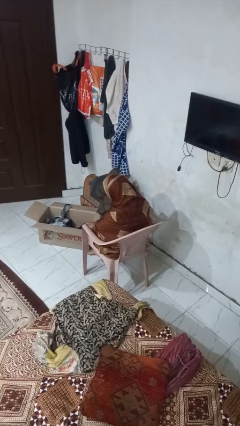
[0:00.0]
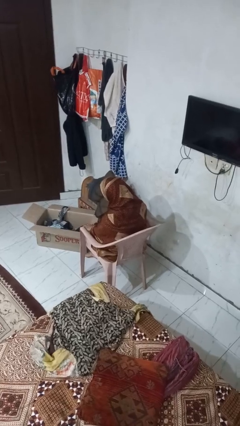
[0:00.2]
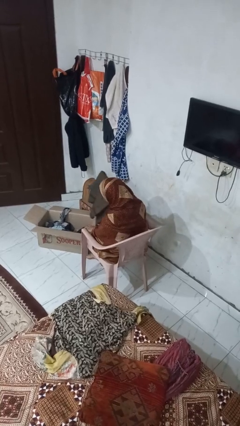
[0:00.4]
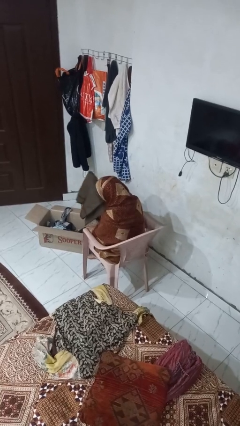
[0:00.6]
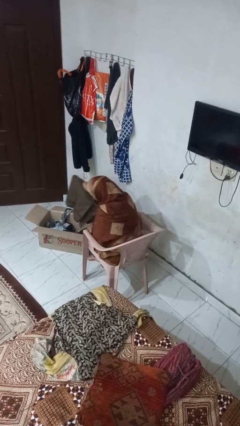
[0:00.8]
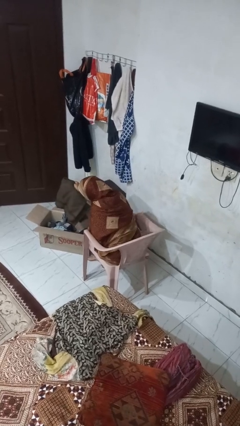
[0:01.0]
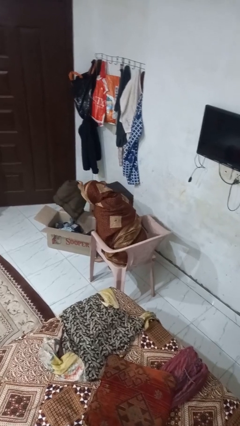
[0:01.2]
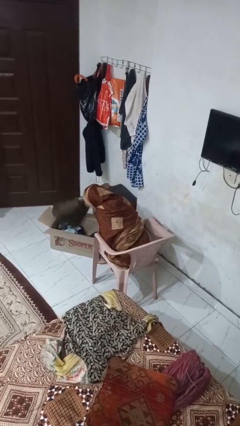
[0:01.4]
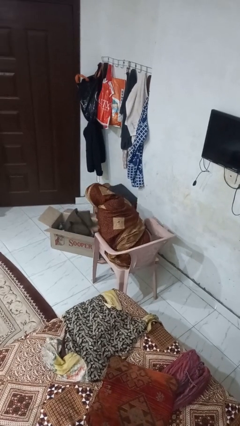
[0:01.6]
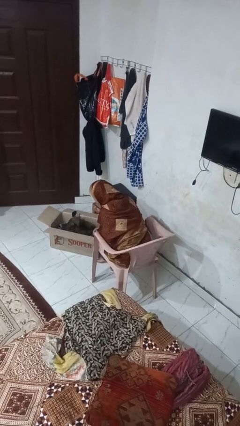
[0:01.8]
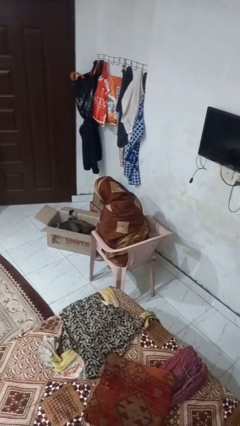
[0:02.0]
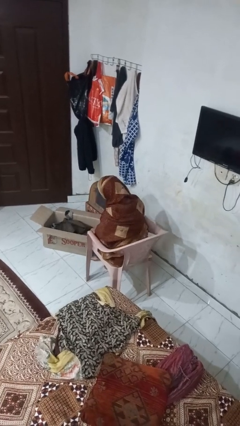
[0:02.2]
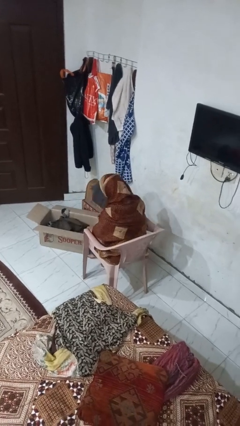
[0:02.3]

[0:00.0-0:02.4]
person puts object into box

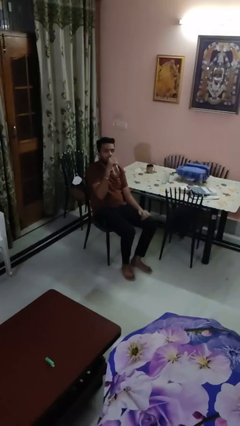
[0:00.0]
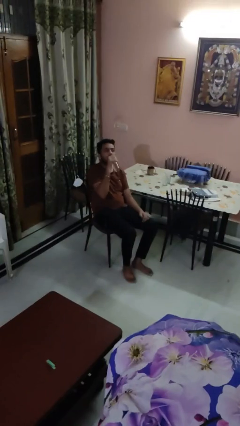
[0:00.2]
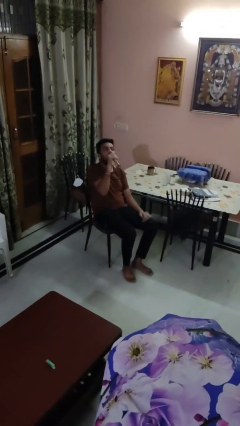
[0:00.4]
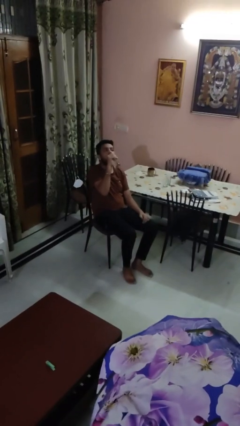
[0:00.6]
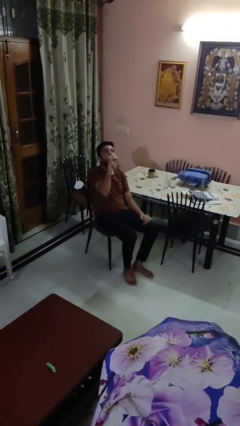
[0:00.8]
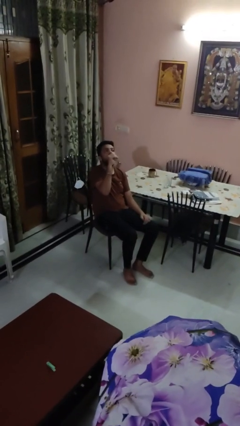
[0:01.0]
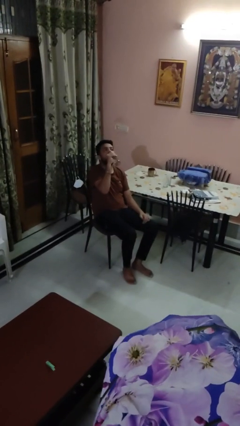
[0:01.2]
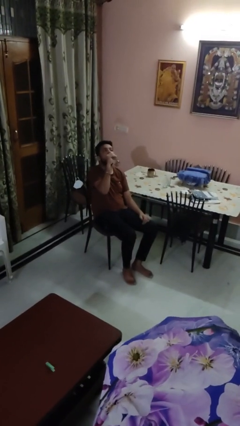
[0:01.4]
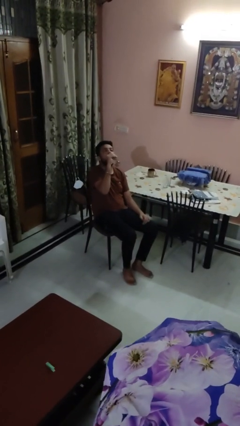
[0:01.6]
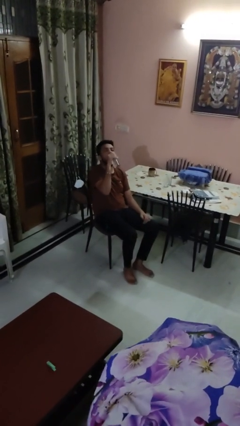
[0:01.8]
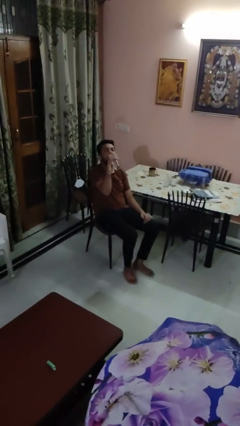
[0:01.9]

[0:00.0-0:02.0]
person drinks from bottle

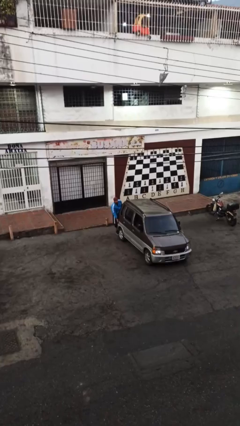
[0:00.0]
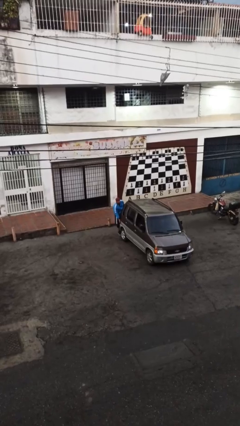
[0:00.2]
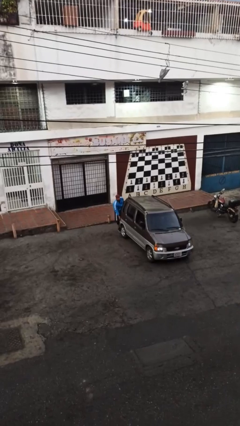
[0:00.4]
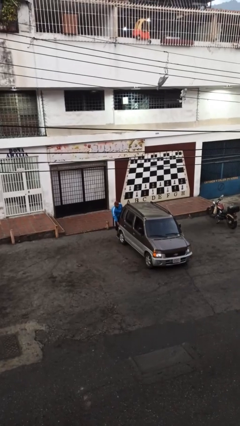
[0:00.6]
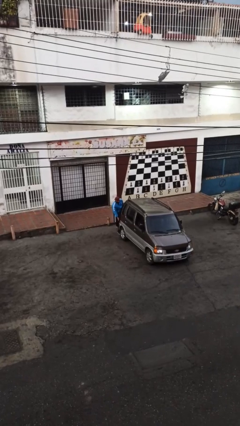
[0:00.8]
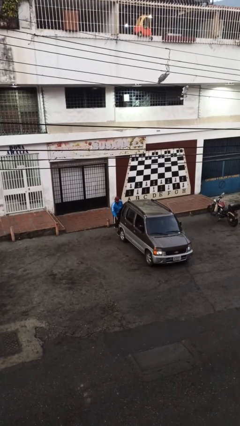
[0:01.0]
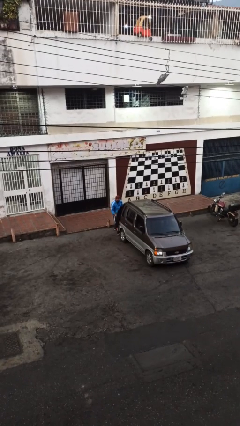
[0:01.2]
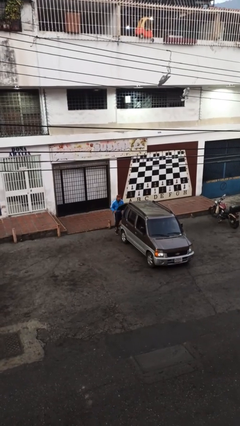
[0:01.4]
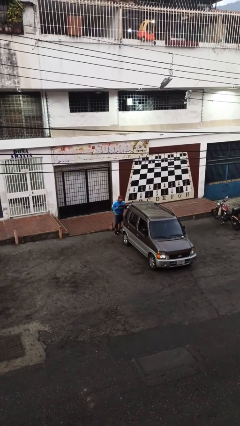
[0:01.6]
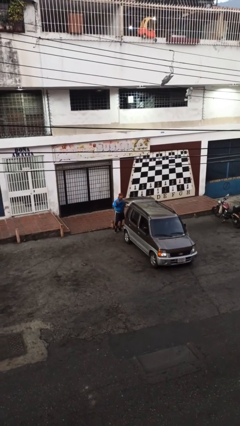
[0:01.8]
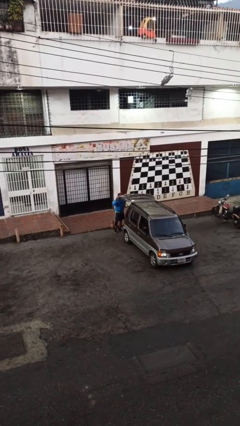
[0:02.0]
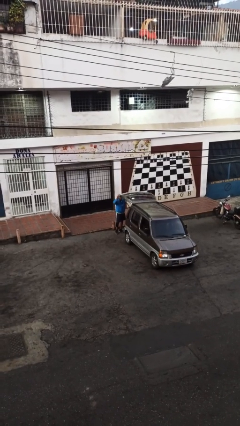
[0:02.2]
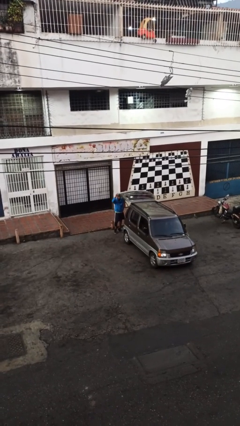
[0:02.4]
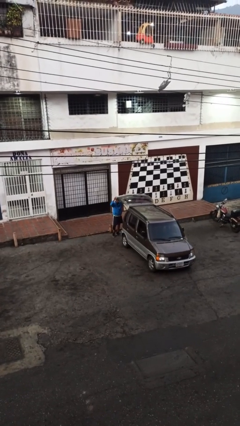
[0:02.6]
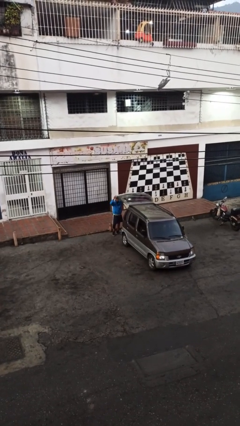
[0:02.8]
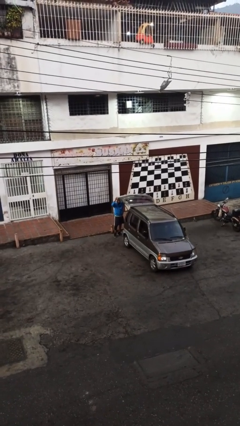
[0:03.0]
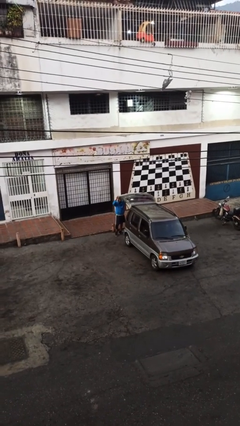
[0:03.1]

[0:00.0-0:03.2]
person opens car trunk

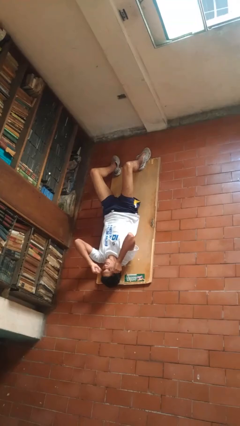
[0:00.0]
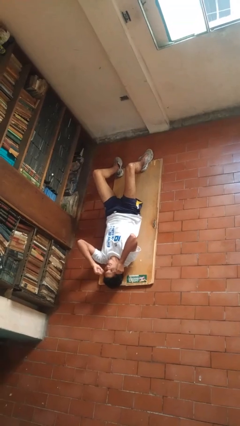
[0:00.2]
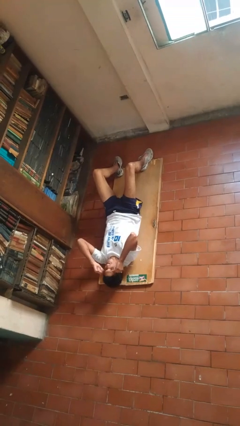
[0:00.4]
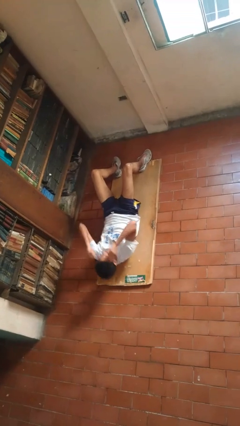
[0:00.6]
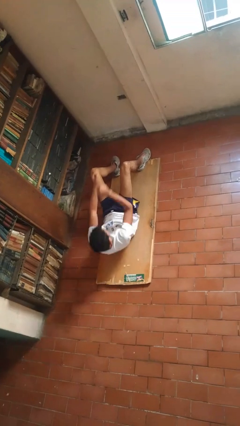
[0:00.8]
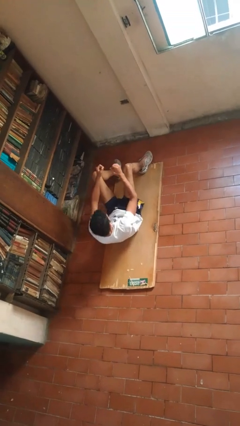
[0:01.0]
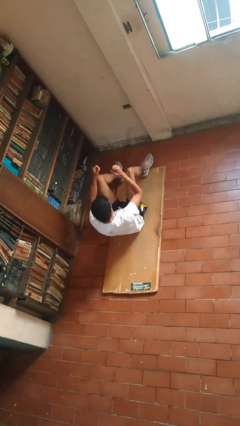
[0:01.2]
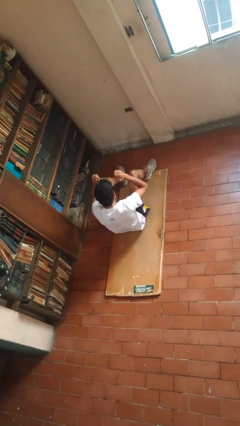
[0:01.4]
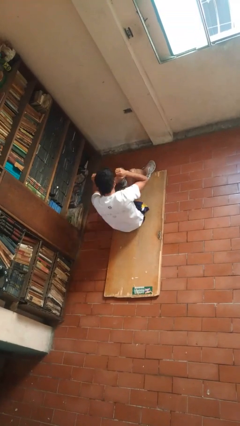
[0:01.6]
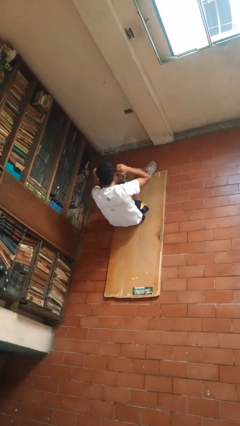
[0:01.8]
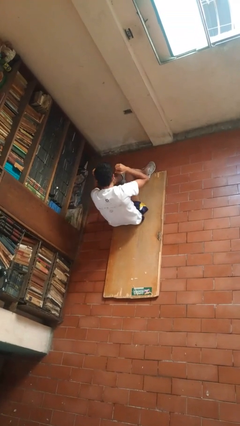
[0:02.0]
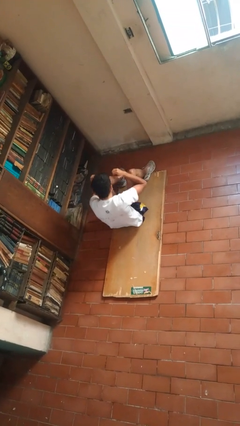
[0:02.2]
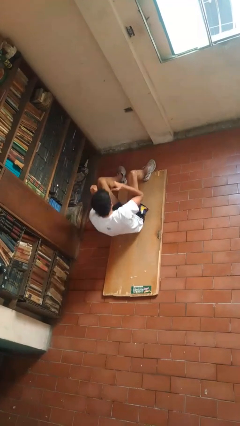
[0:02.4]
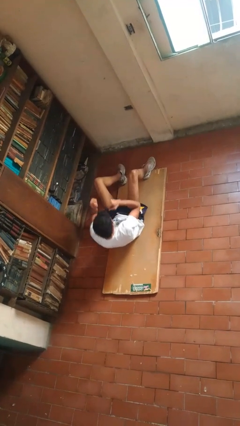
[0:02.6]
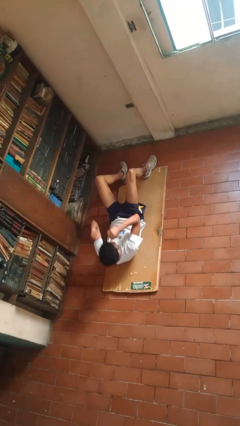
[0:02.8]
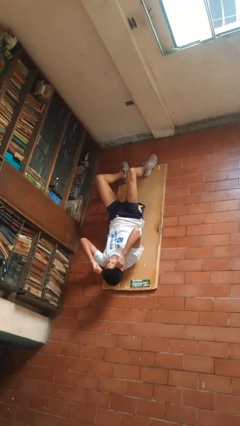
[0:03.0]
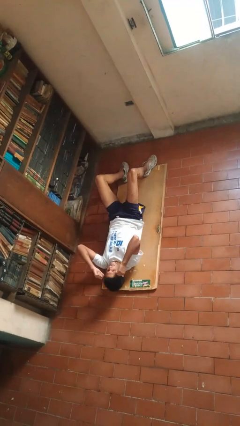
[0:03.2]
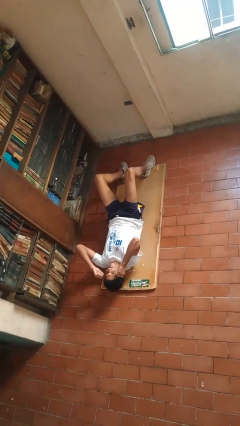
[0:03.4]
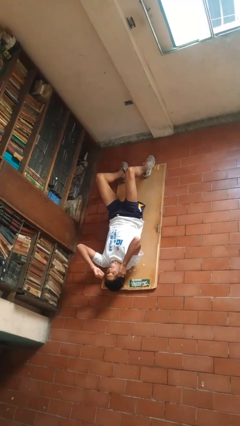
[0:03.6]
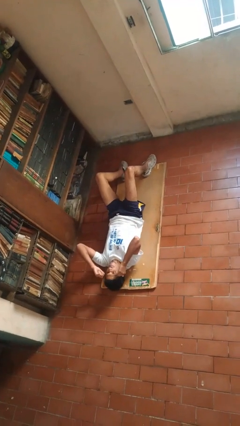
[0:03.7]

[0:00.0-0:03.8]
person exercises with situp

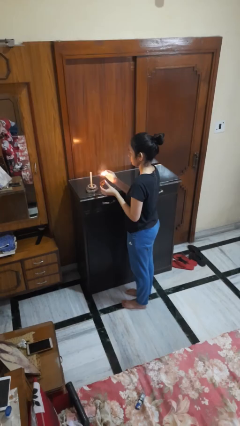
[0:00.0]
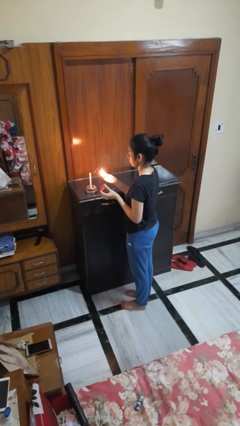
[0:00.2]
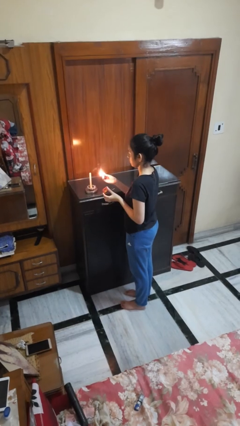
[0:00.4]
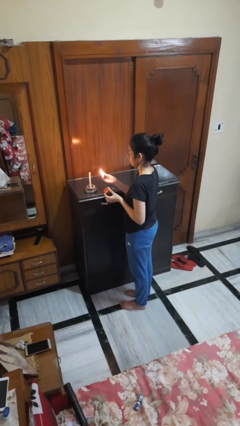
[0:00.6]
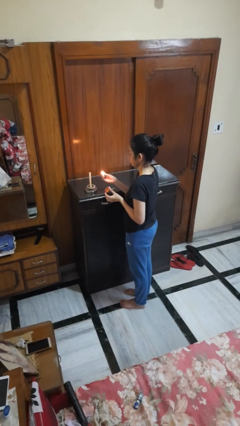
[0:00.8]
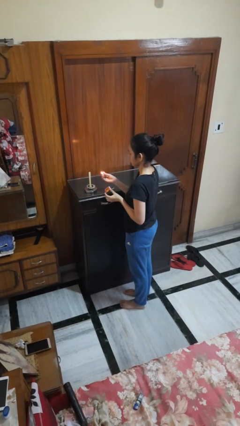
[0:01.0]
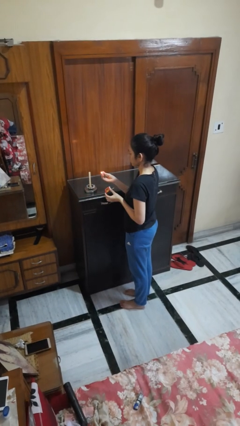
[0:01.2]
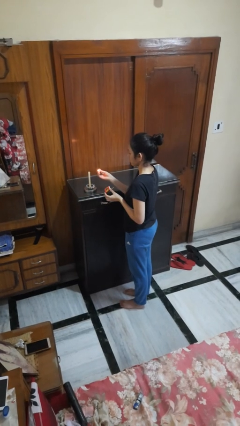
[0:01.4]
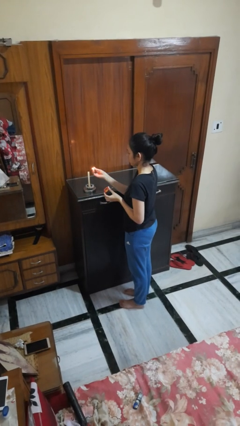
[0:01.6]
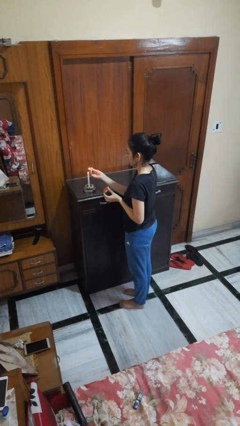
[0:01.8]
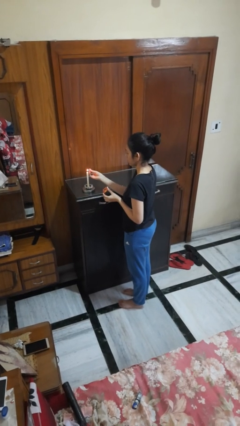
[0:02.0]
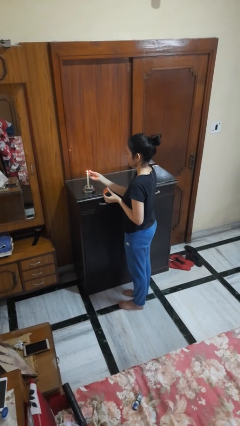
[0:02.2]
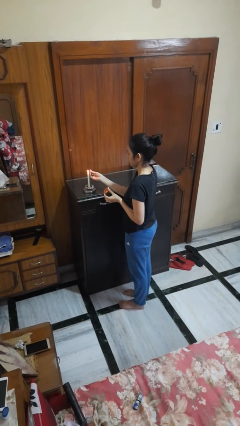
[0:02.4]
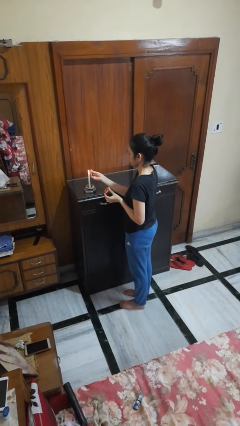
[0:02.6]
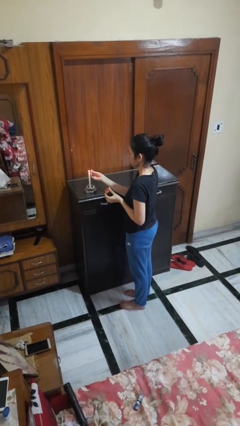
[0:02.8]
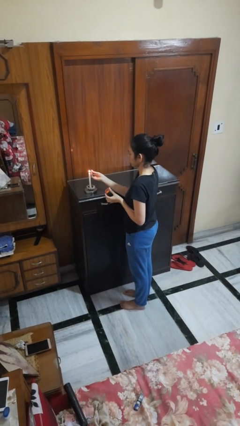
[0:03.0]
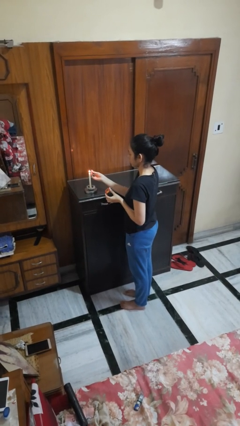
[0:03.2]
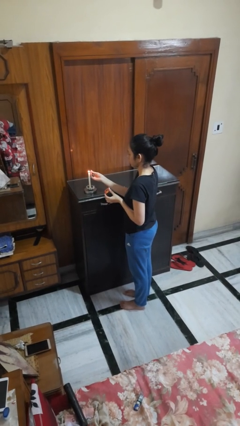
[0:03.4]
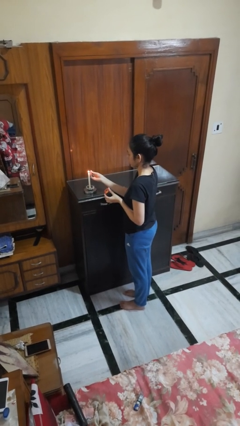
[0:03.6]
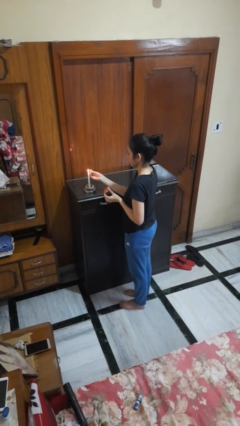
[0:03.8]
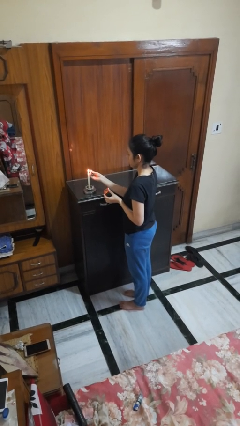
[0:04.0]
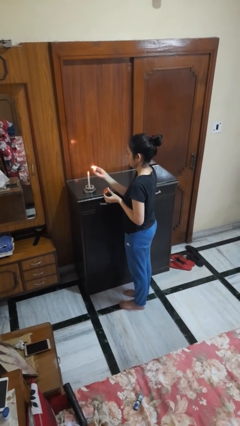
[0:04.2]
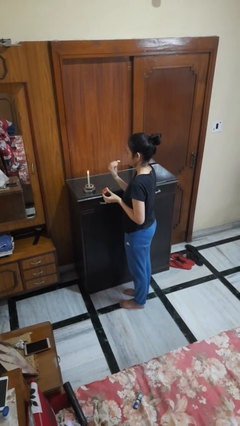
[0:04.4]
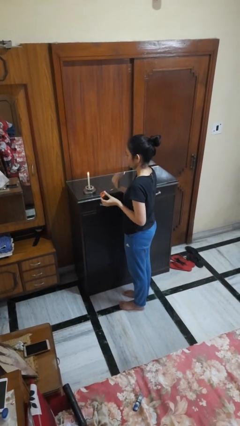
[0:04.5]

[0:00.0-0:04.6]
person lights candle

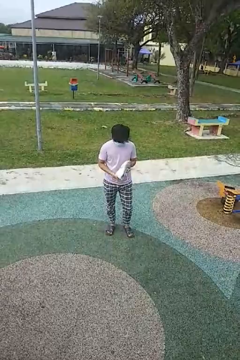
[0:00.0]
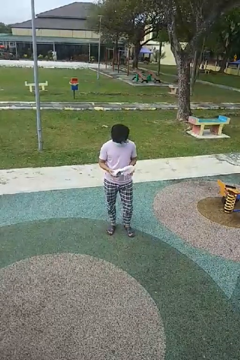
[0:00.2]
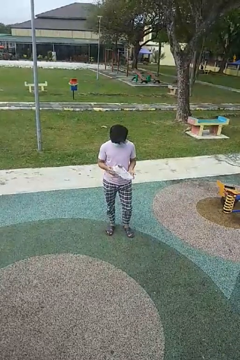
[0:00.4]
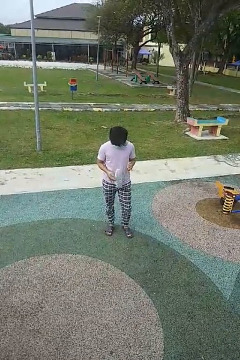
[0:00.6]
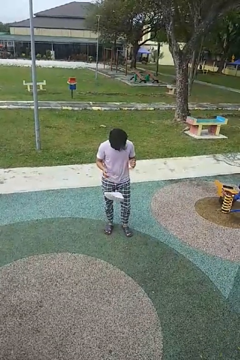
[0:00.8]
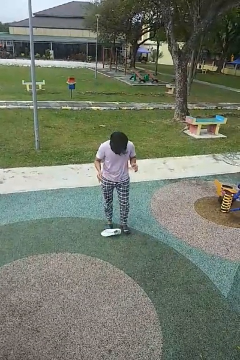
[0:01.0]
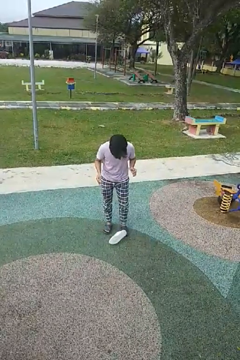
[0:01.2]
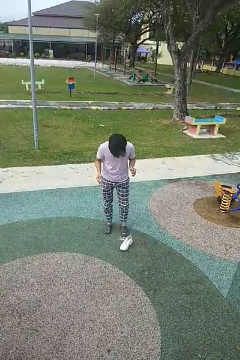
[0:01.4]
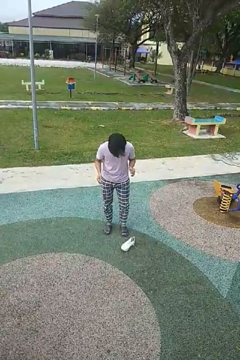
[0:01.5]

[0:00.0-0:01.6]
person drops object
